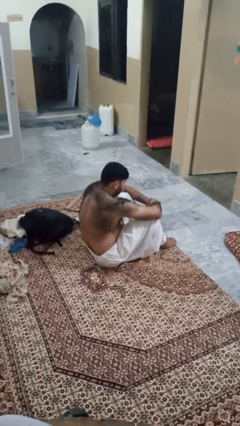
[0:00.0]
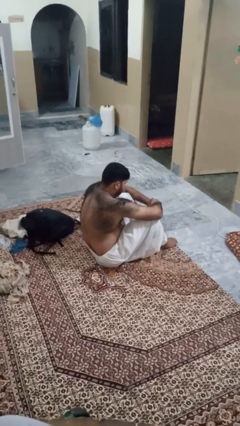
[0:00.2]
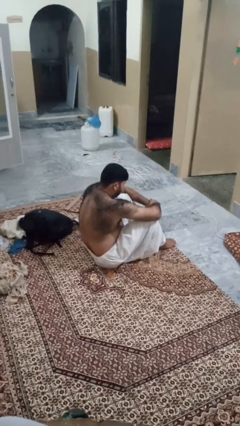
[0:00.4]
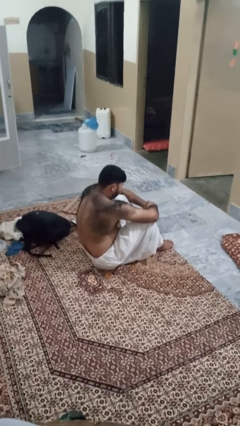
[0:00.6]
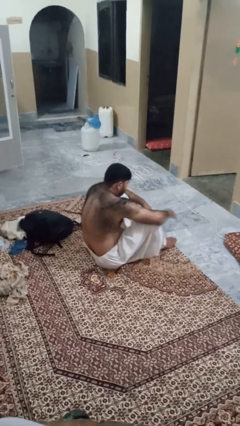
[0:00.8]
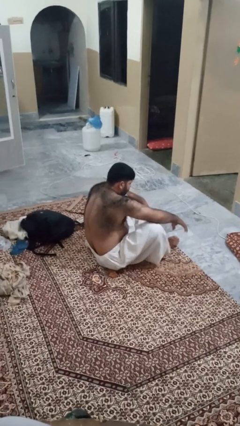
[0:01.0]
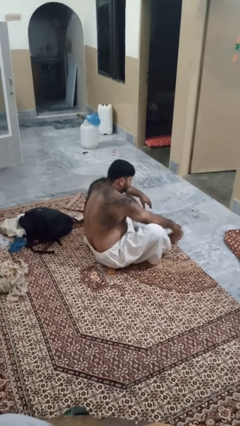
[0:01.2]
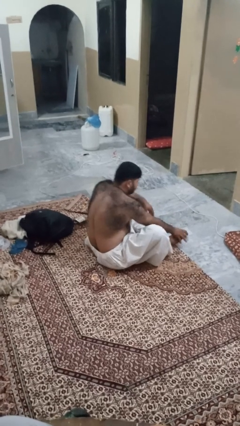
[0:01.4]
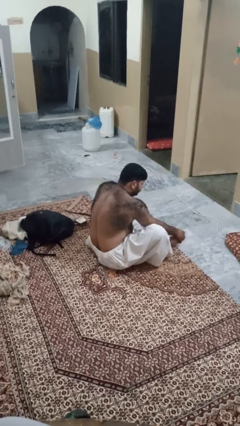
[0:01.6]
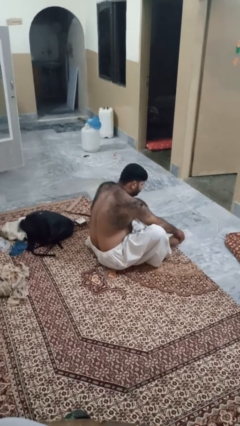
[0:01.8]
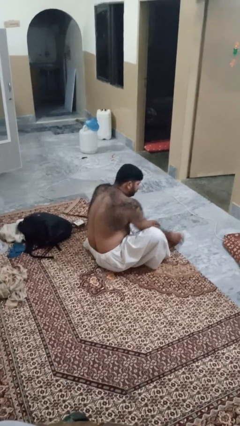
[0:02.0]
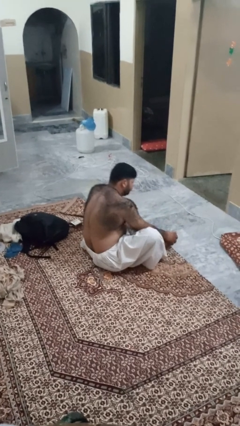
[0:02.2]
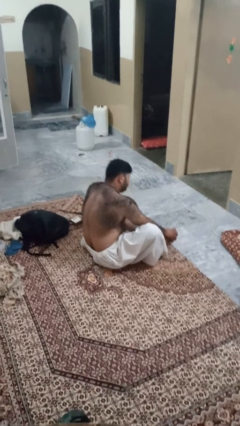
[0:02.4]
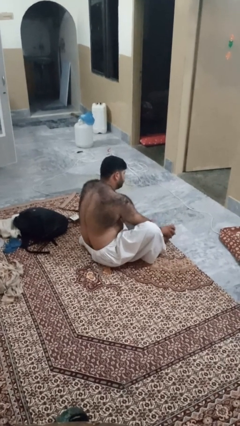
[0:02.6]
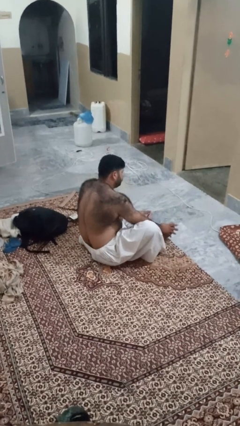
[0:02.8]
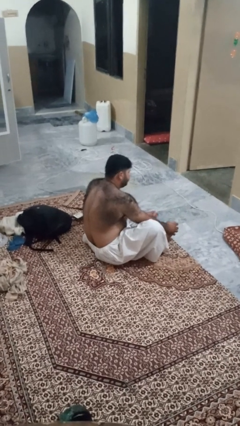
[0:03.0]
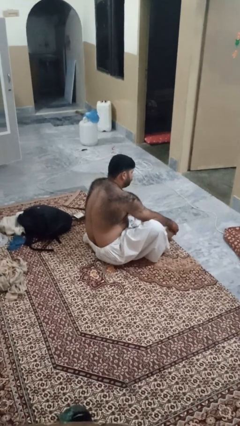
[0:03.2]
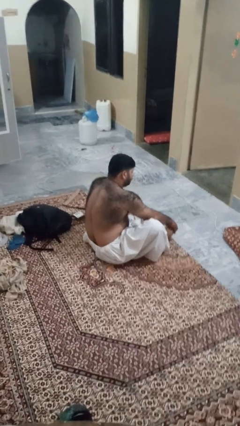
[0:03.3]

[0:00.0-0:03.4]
person rubs foot

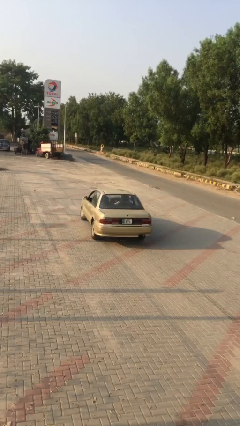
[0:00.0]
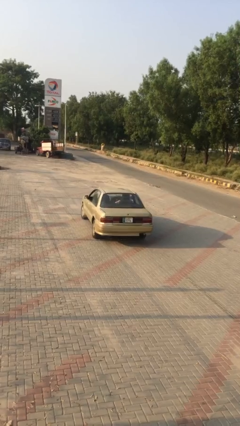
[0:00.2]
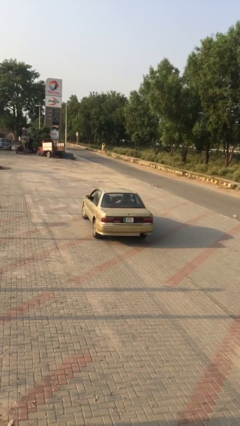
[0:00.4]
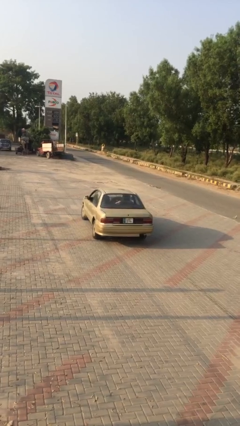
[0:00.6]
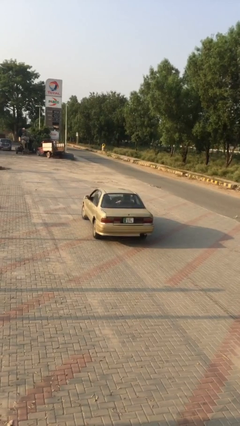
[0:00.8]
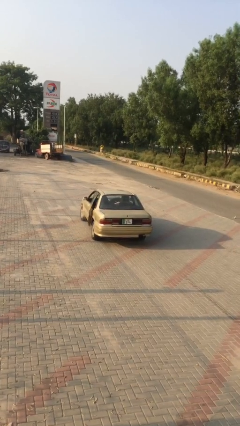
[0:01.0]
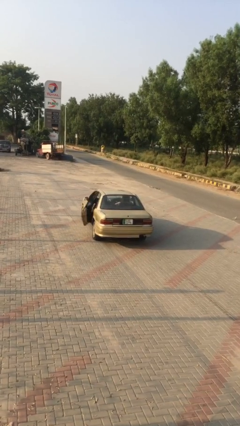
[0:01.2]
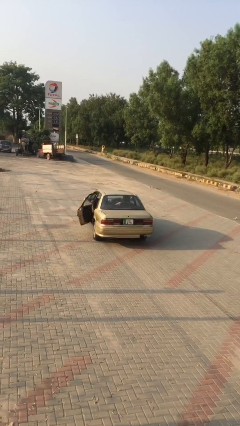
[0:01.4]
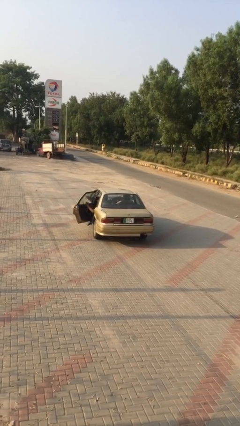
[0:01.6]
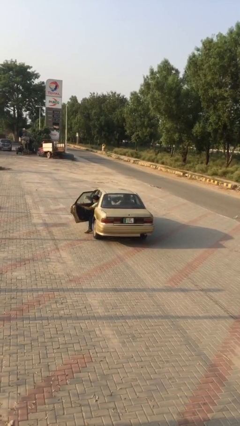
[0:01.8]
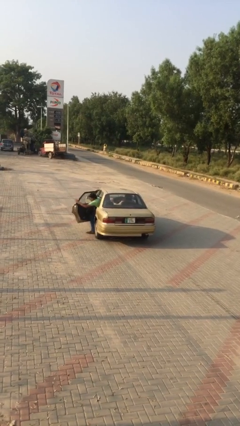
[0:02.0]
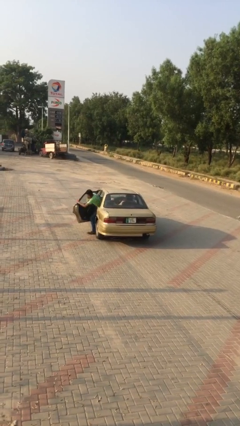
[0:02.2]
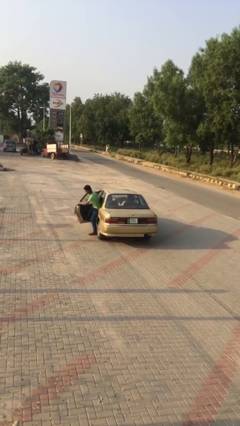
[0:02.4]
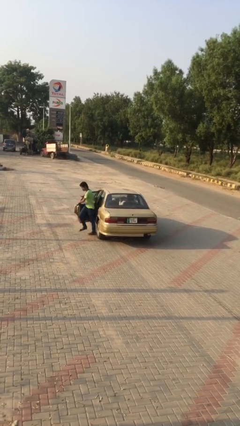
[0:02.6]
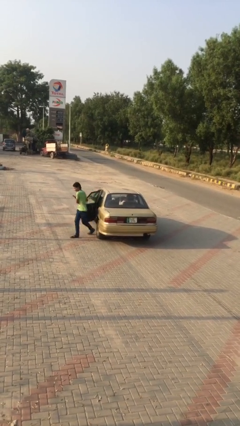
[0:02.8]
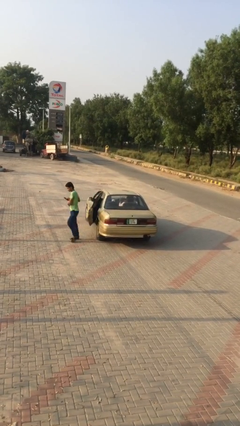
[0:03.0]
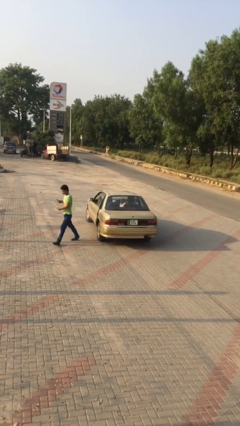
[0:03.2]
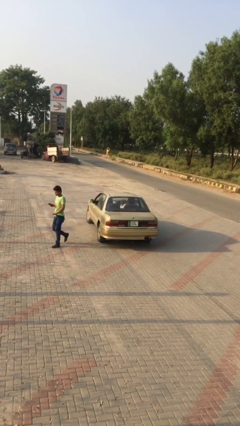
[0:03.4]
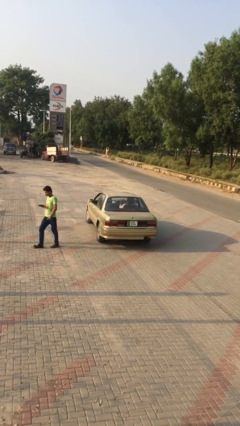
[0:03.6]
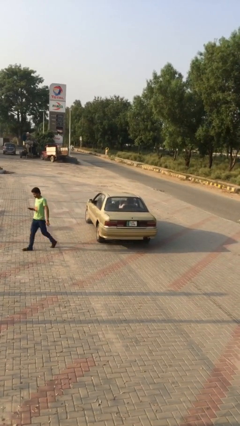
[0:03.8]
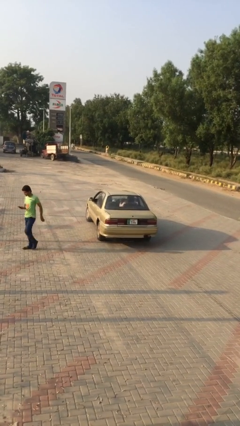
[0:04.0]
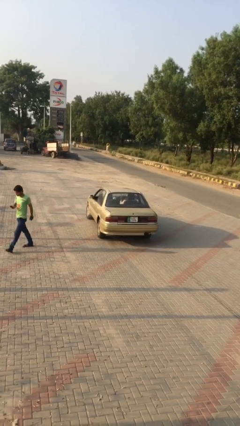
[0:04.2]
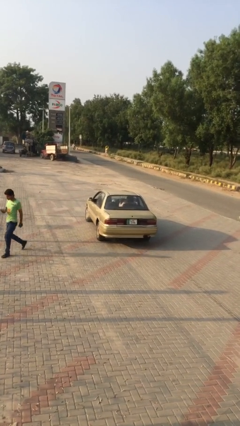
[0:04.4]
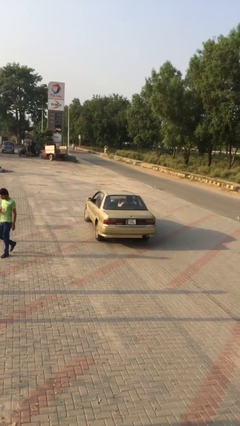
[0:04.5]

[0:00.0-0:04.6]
car drops off person

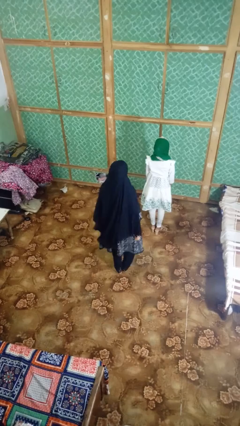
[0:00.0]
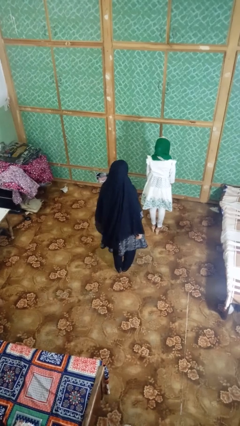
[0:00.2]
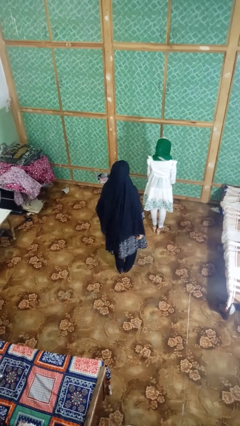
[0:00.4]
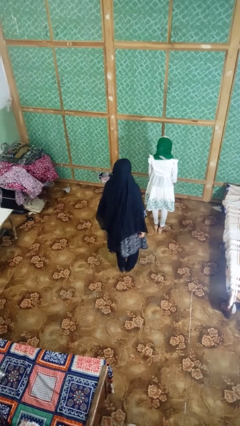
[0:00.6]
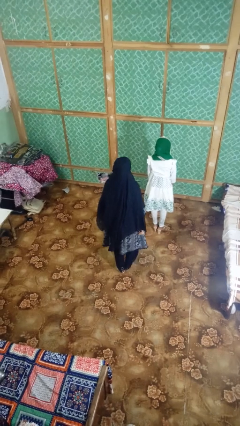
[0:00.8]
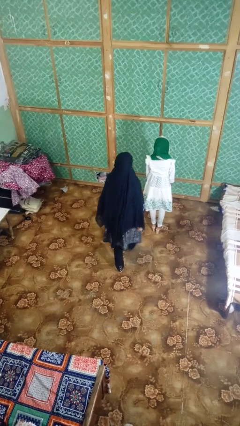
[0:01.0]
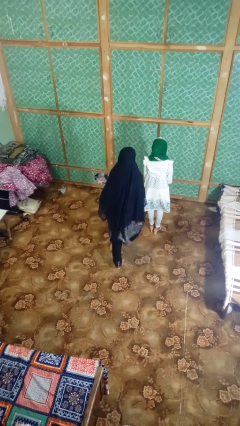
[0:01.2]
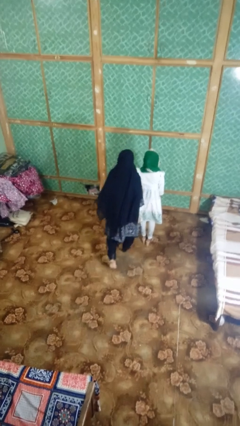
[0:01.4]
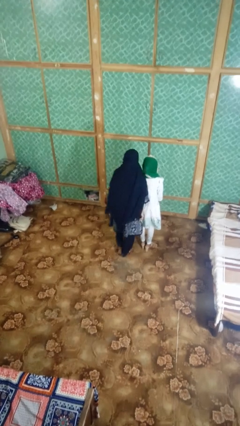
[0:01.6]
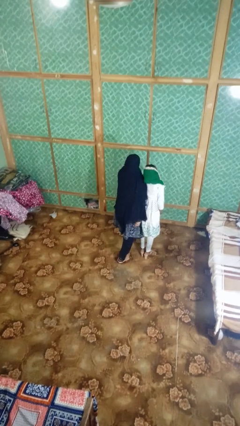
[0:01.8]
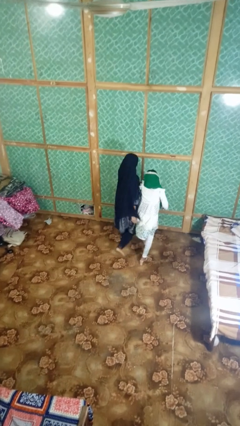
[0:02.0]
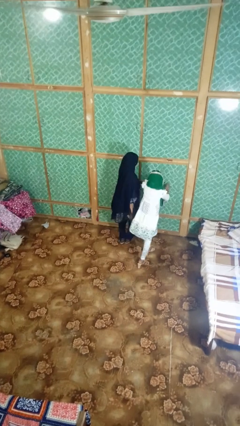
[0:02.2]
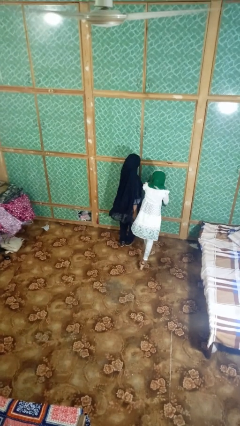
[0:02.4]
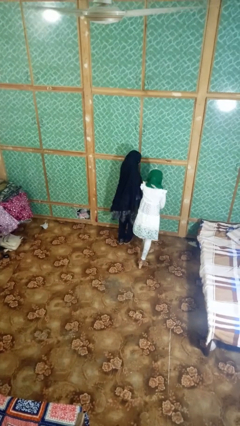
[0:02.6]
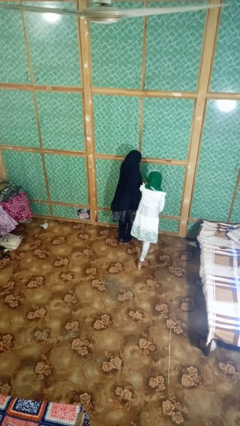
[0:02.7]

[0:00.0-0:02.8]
person bumps into person

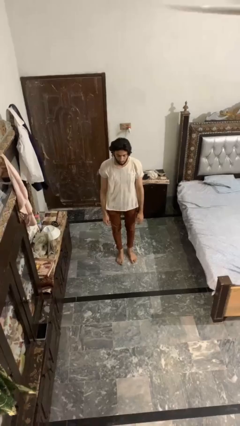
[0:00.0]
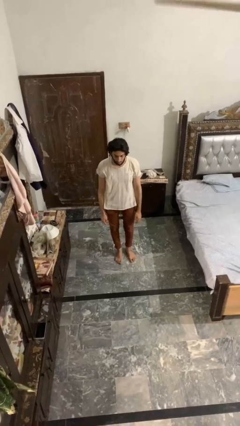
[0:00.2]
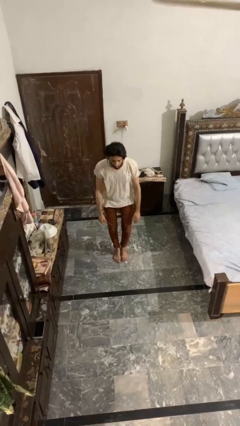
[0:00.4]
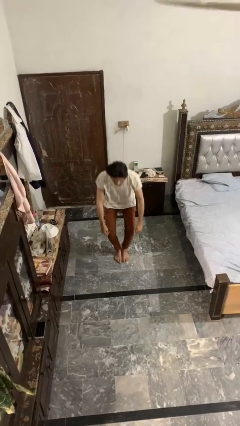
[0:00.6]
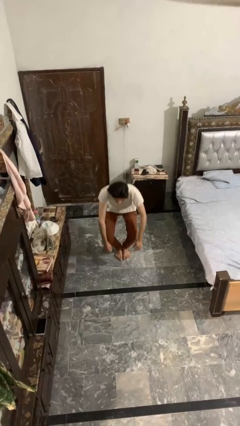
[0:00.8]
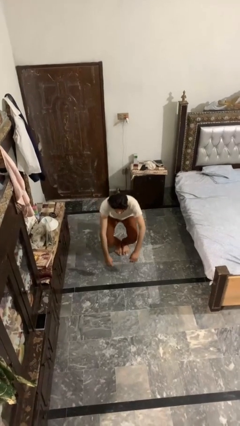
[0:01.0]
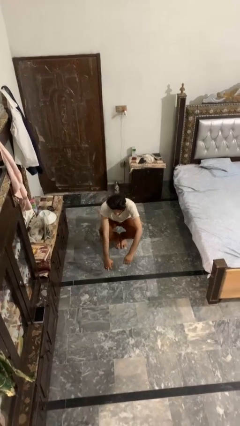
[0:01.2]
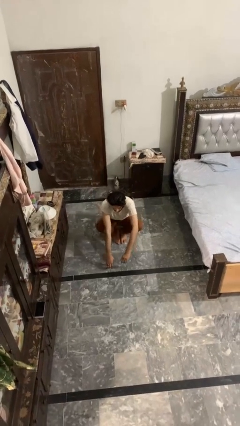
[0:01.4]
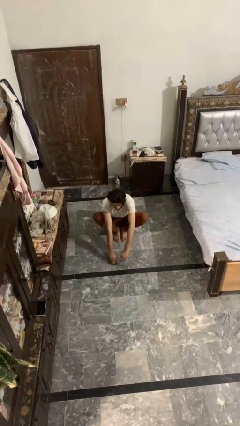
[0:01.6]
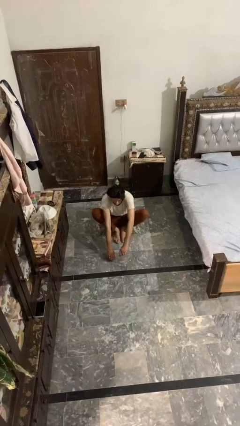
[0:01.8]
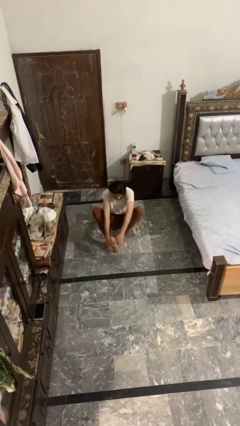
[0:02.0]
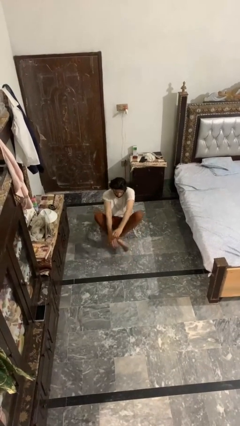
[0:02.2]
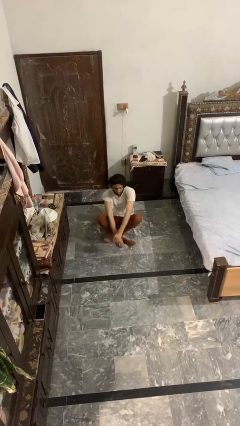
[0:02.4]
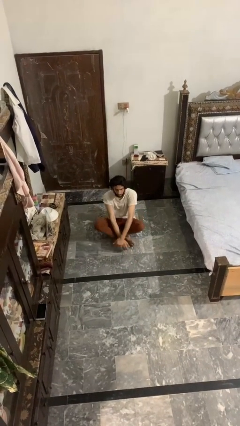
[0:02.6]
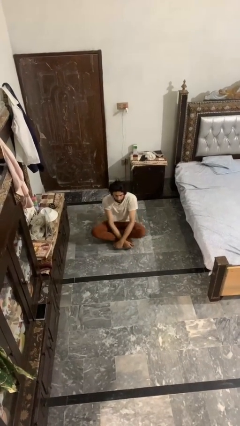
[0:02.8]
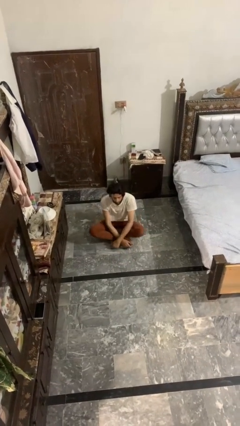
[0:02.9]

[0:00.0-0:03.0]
person sits crisscross

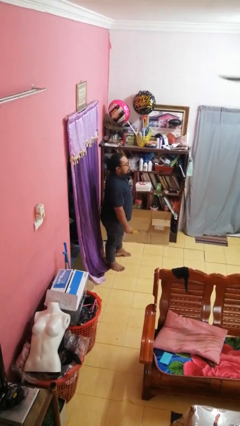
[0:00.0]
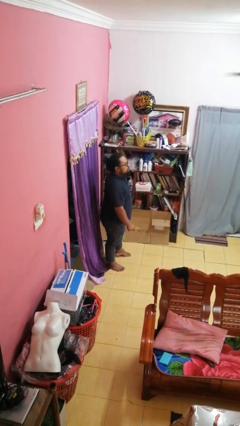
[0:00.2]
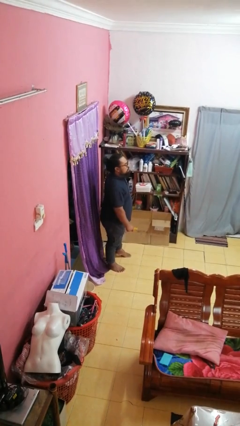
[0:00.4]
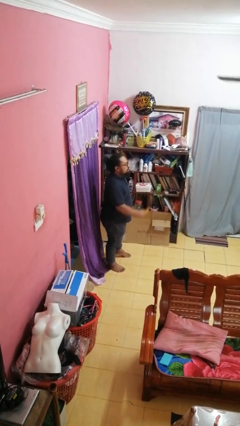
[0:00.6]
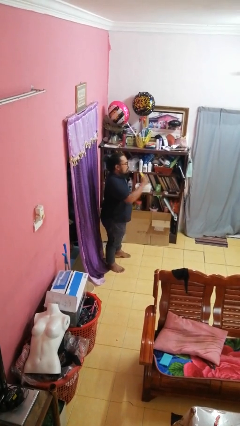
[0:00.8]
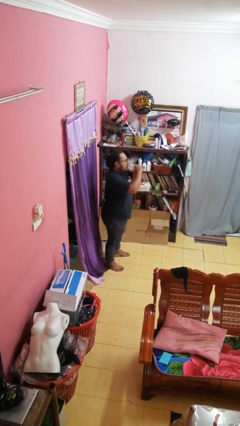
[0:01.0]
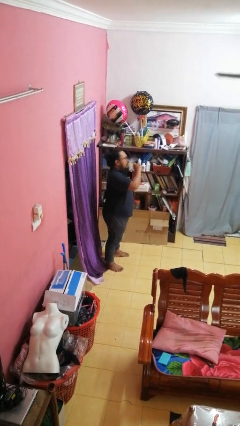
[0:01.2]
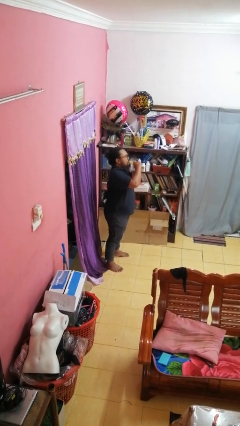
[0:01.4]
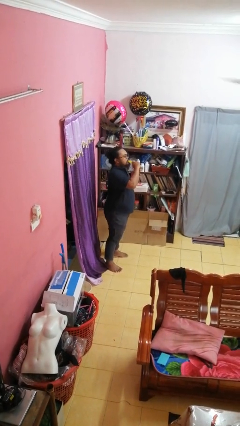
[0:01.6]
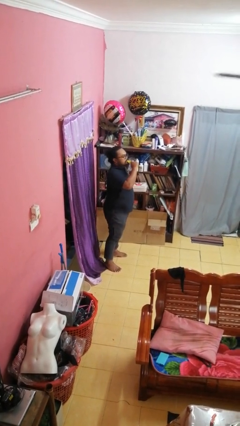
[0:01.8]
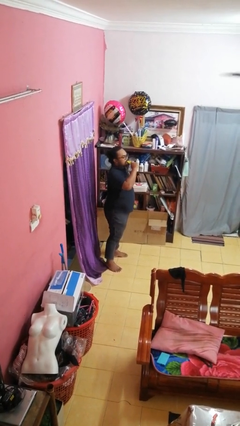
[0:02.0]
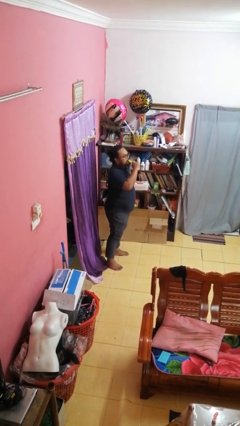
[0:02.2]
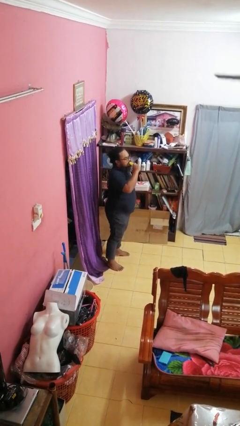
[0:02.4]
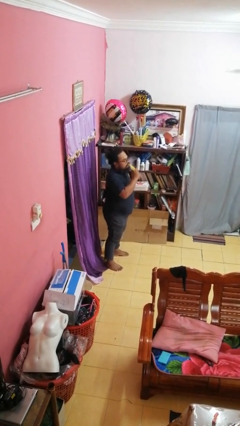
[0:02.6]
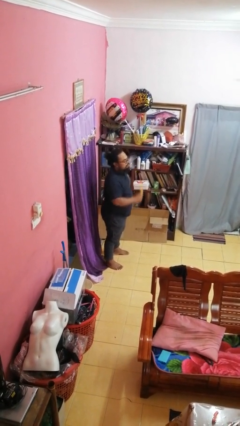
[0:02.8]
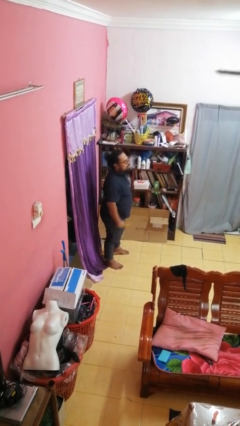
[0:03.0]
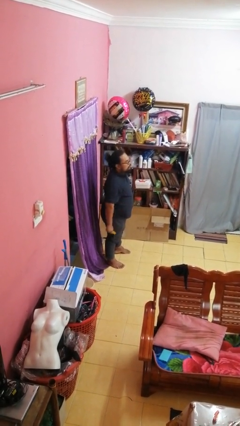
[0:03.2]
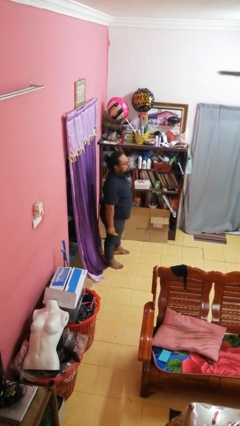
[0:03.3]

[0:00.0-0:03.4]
person eats banana
